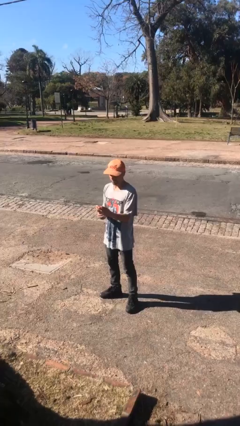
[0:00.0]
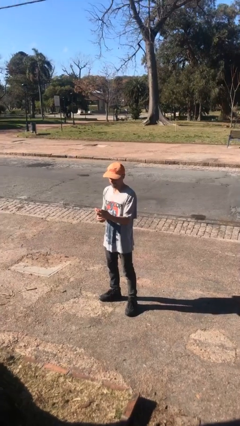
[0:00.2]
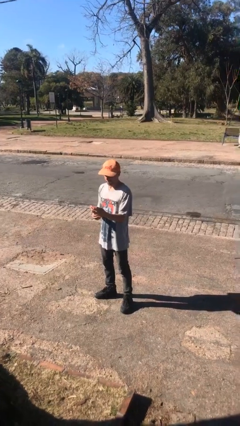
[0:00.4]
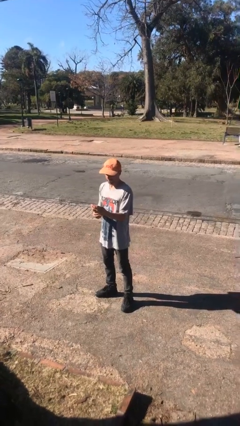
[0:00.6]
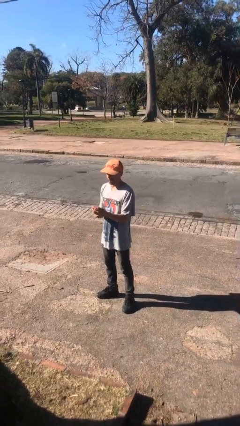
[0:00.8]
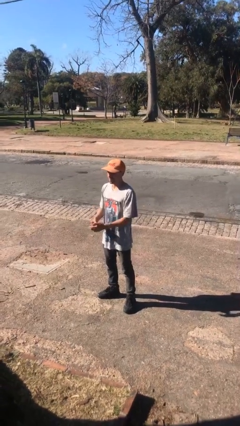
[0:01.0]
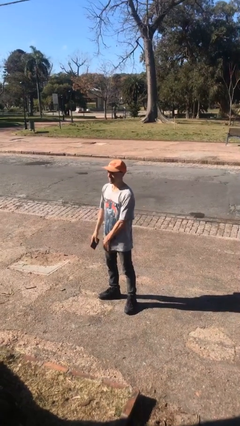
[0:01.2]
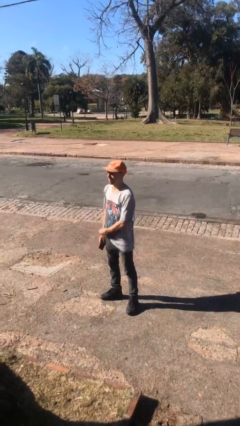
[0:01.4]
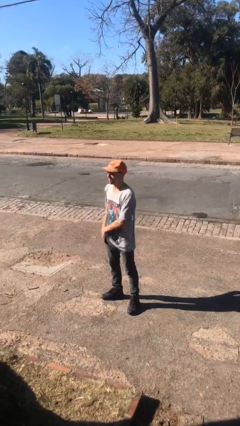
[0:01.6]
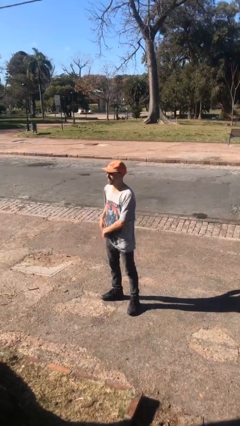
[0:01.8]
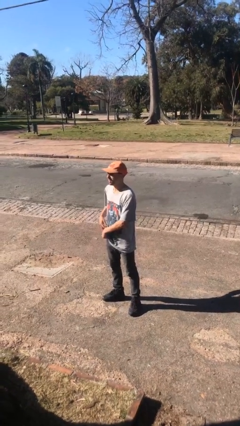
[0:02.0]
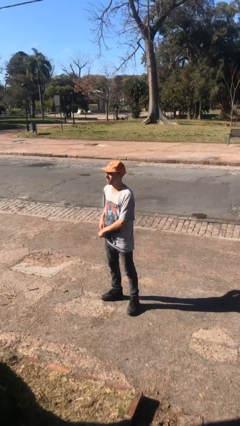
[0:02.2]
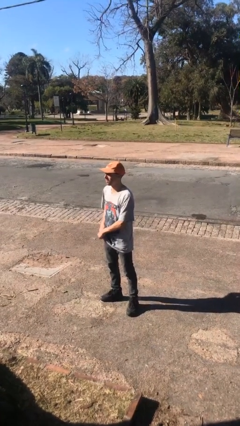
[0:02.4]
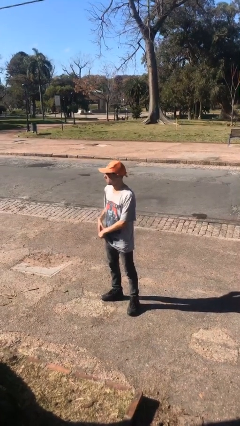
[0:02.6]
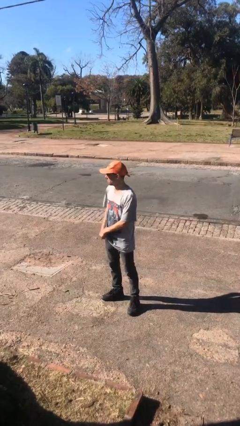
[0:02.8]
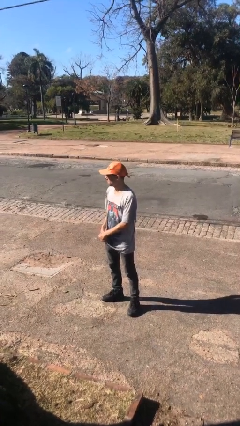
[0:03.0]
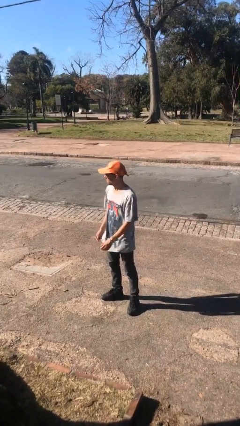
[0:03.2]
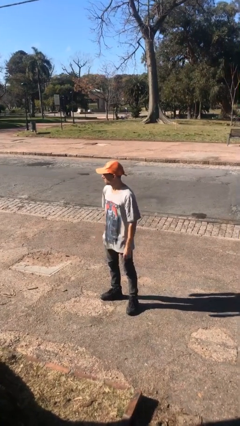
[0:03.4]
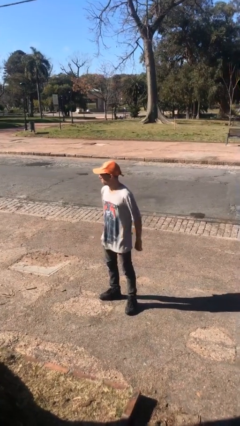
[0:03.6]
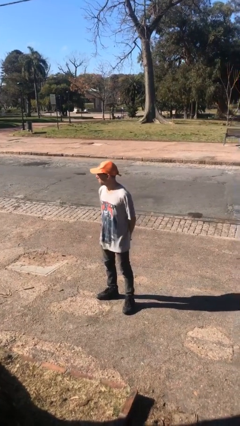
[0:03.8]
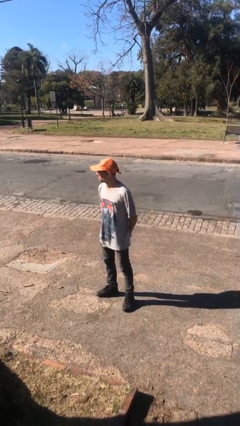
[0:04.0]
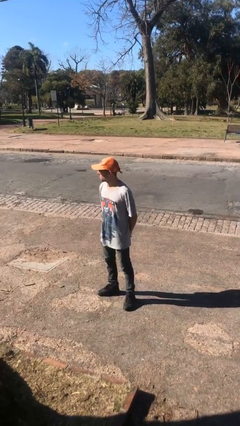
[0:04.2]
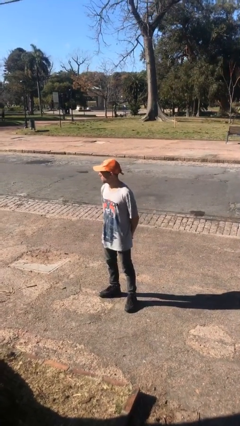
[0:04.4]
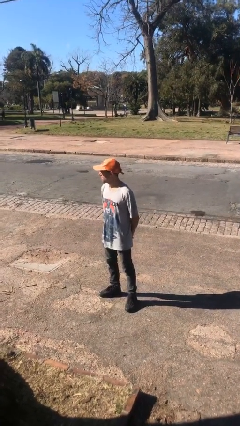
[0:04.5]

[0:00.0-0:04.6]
person puts phone into pocket

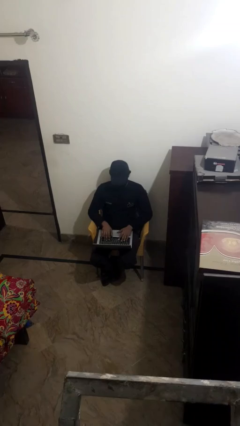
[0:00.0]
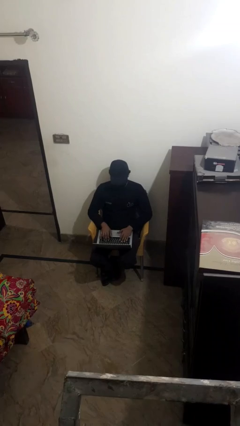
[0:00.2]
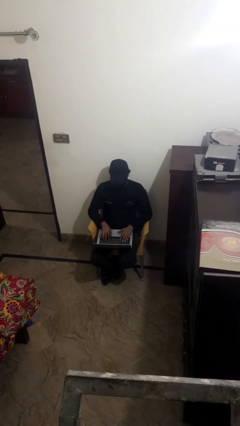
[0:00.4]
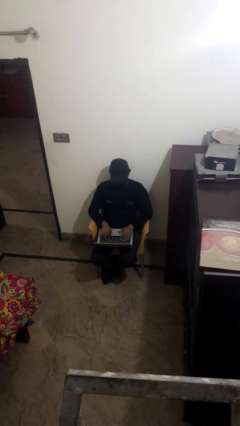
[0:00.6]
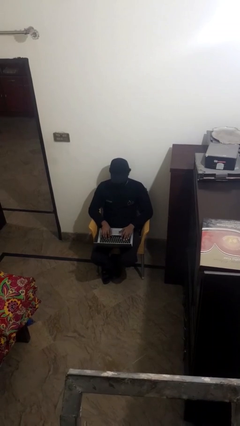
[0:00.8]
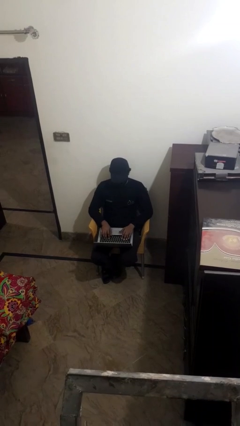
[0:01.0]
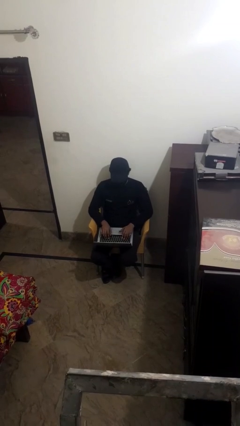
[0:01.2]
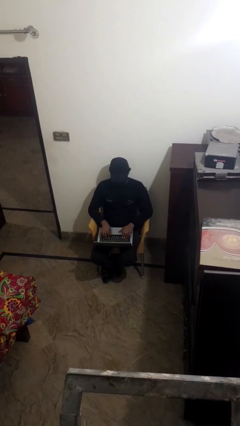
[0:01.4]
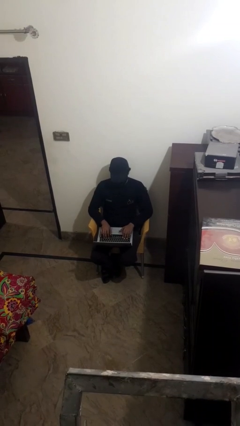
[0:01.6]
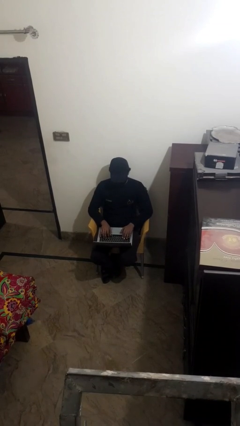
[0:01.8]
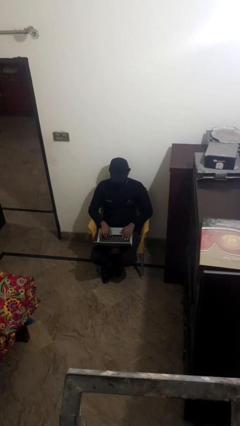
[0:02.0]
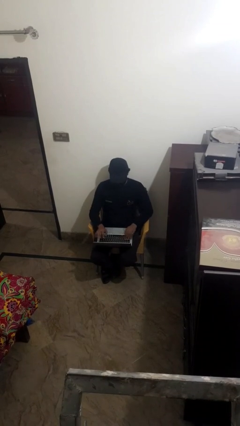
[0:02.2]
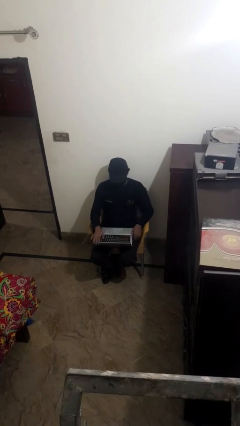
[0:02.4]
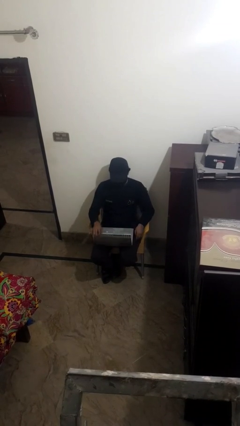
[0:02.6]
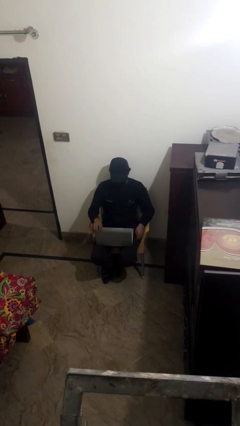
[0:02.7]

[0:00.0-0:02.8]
person interacts with laptop

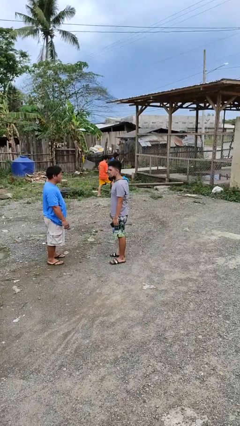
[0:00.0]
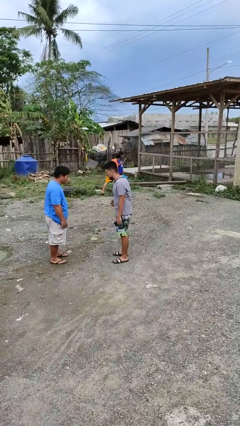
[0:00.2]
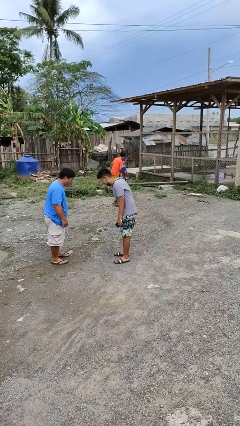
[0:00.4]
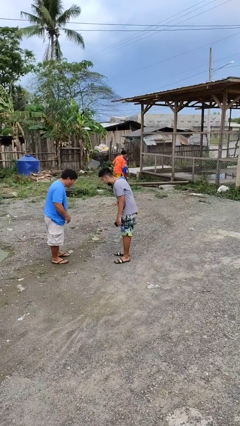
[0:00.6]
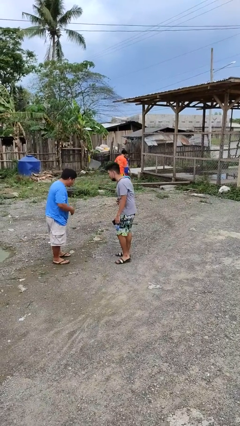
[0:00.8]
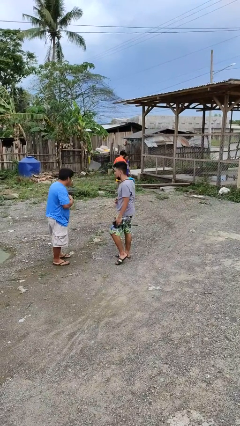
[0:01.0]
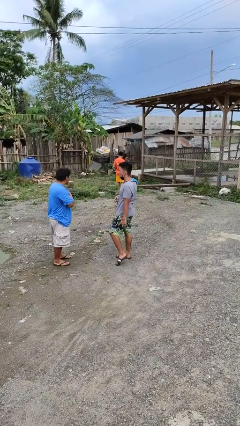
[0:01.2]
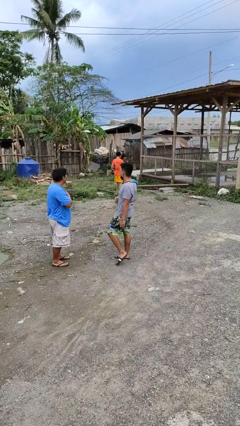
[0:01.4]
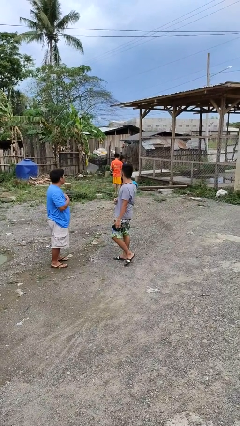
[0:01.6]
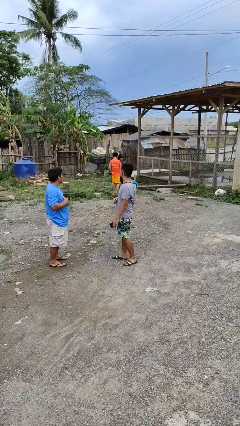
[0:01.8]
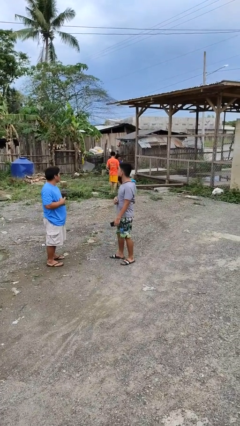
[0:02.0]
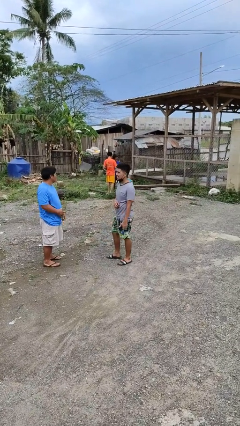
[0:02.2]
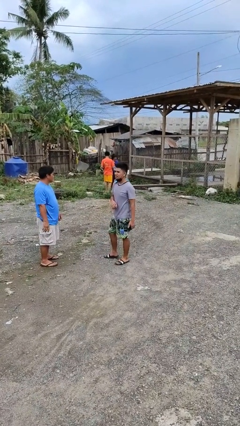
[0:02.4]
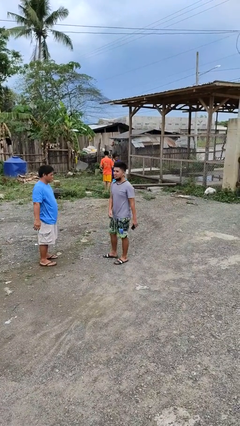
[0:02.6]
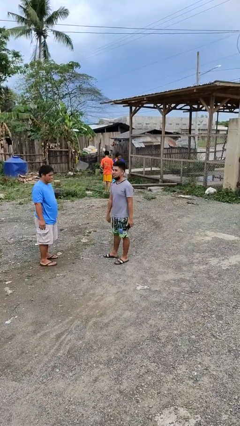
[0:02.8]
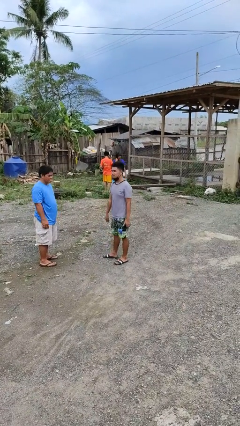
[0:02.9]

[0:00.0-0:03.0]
person laughs with person

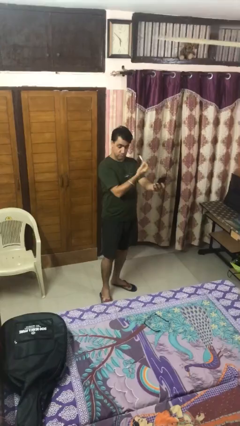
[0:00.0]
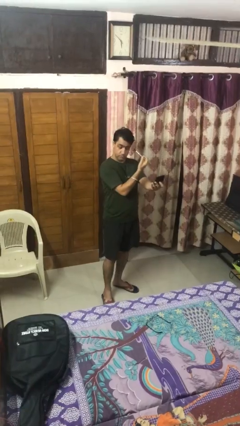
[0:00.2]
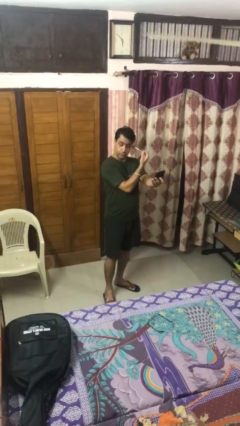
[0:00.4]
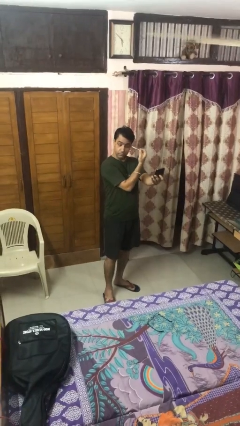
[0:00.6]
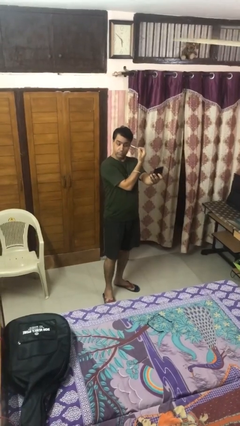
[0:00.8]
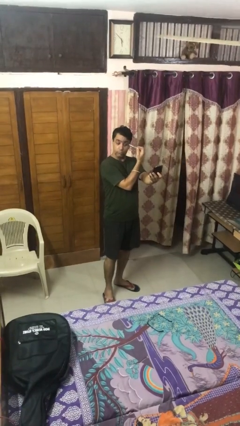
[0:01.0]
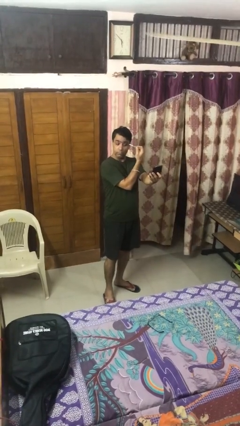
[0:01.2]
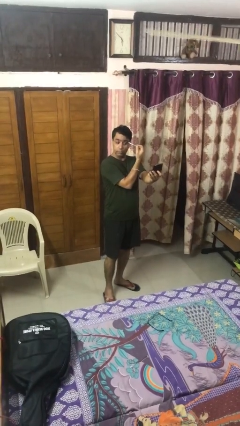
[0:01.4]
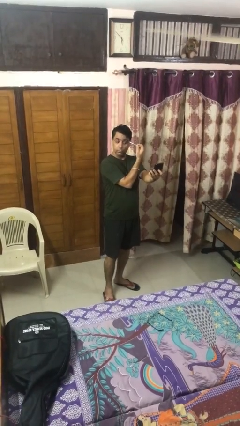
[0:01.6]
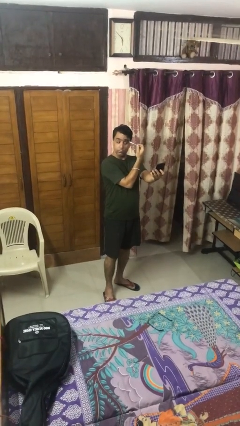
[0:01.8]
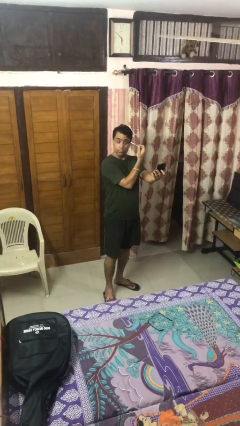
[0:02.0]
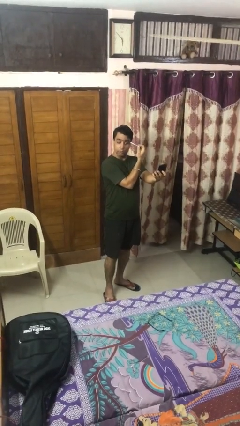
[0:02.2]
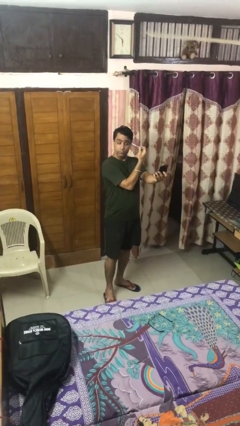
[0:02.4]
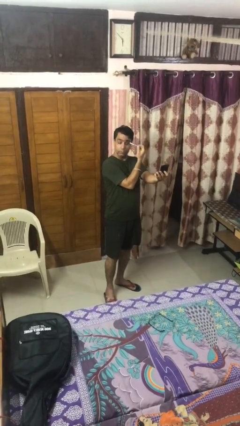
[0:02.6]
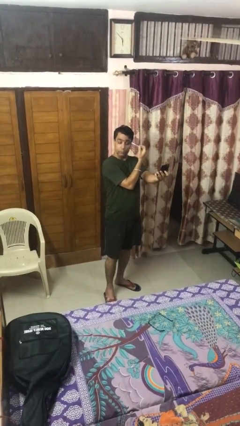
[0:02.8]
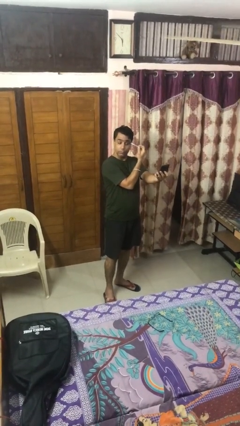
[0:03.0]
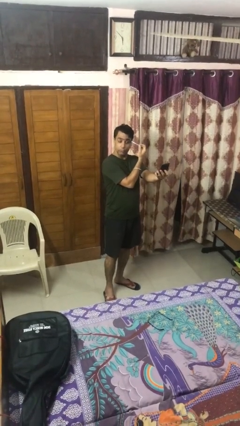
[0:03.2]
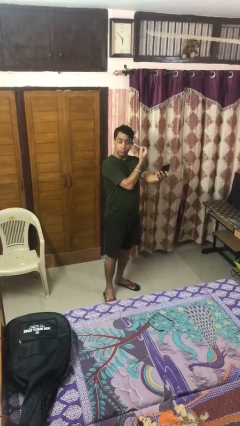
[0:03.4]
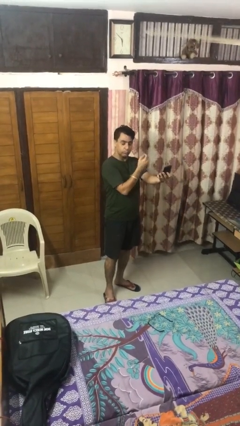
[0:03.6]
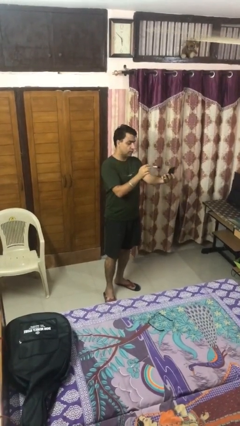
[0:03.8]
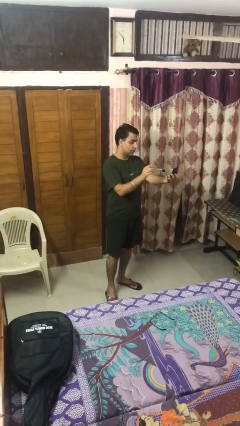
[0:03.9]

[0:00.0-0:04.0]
person applies eye makeup

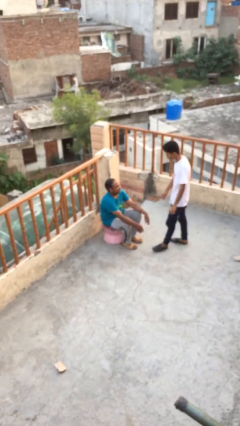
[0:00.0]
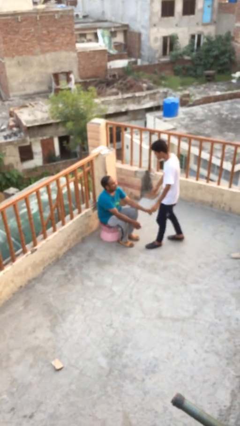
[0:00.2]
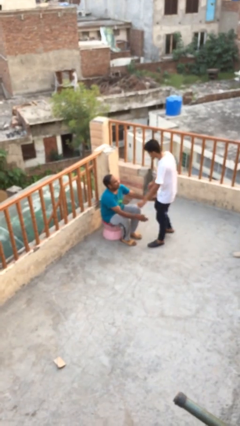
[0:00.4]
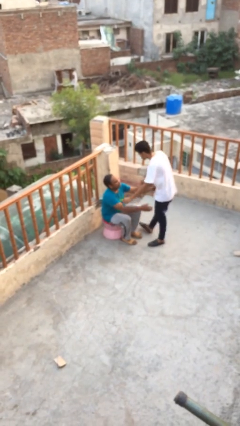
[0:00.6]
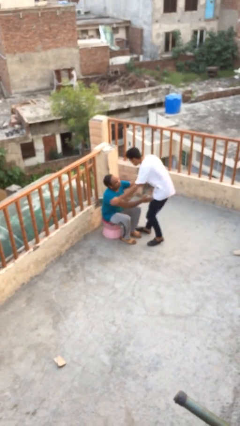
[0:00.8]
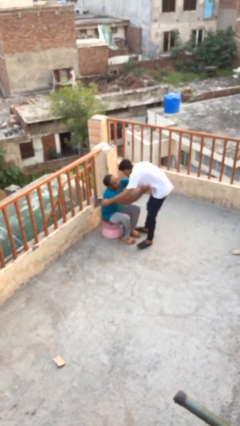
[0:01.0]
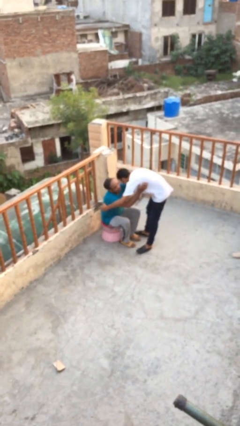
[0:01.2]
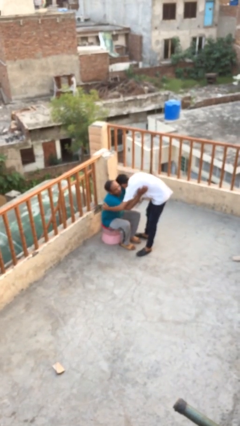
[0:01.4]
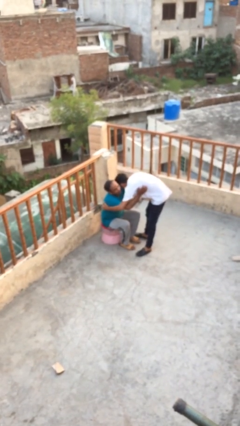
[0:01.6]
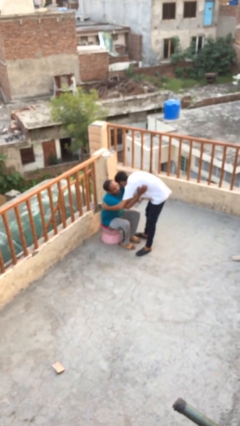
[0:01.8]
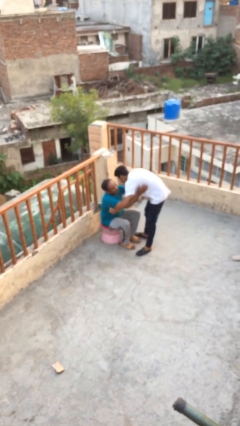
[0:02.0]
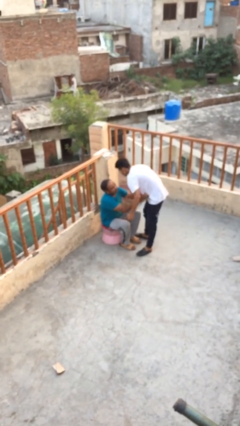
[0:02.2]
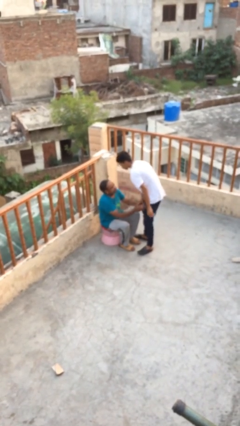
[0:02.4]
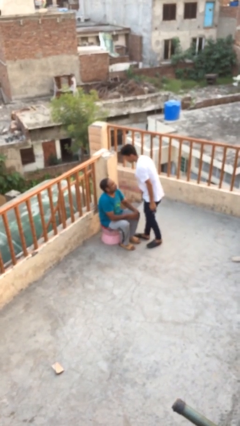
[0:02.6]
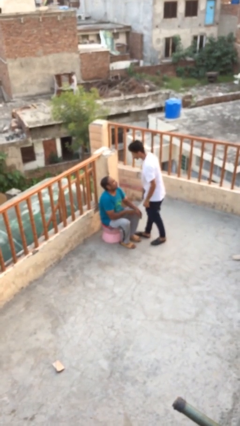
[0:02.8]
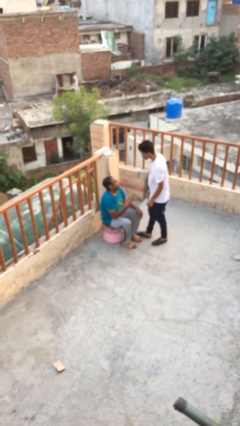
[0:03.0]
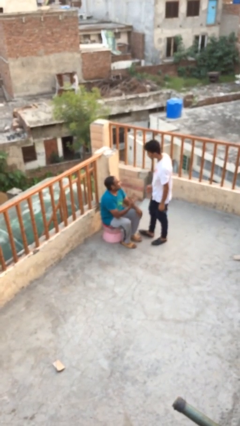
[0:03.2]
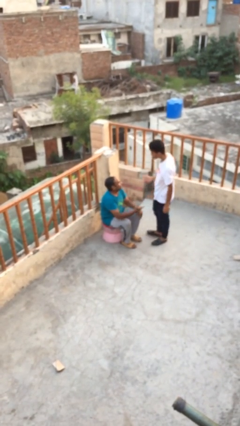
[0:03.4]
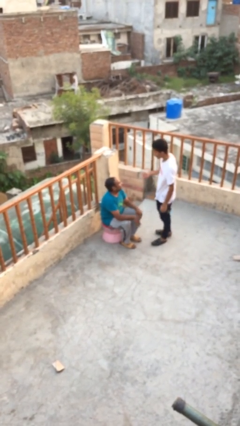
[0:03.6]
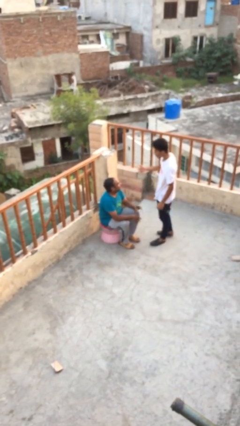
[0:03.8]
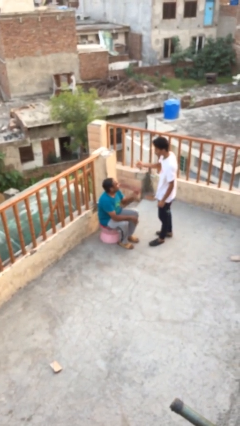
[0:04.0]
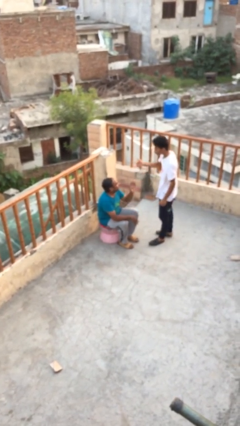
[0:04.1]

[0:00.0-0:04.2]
person embraces person
